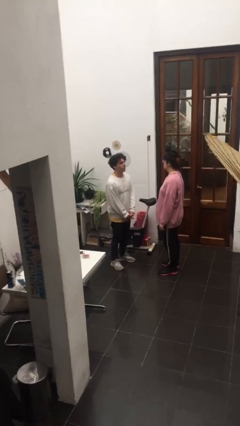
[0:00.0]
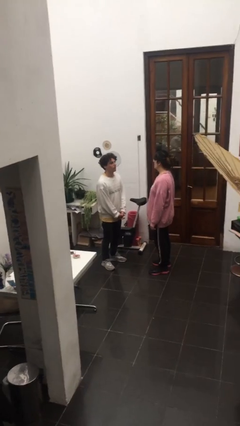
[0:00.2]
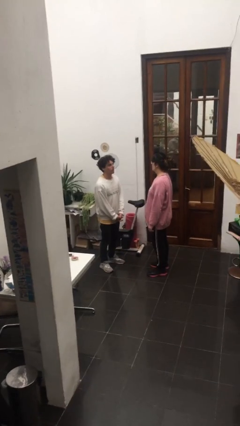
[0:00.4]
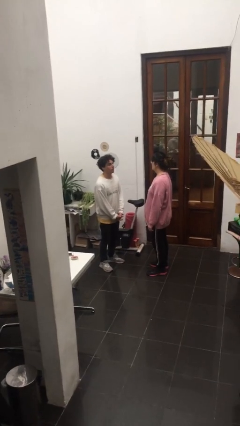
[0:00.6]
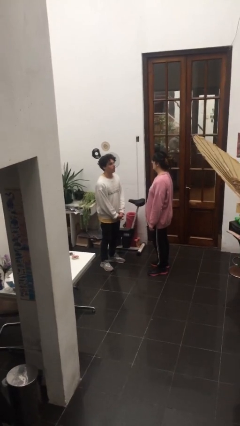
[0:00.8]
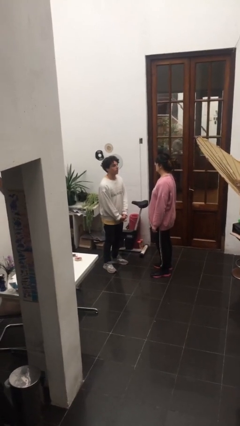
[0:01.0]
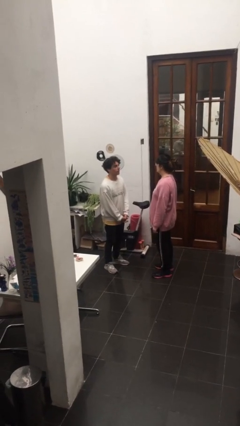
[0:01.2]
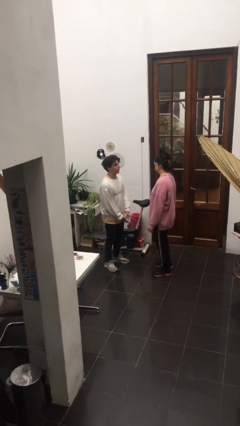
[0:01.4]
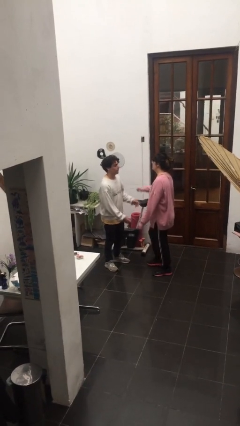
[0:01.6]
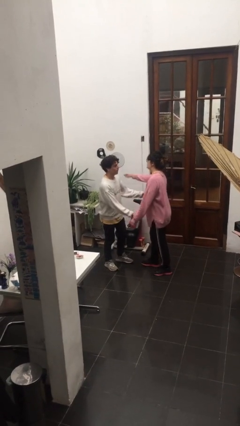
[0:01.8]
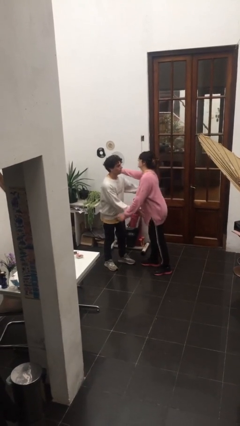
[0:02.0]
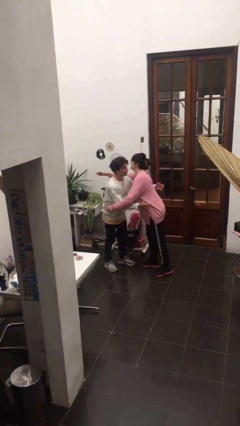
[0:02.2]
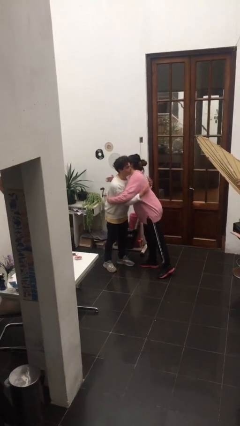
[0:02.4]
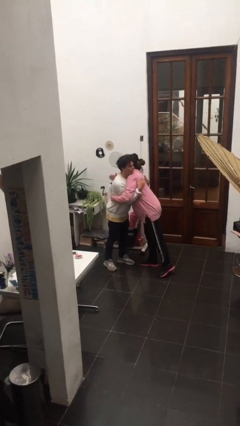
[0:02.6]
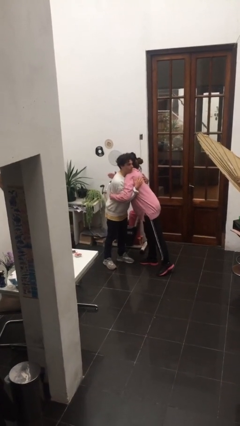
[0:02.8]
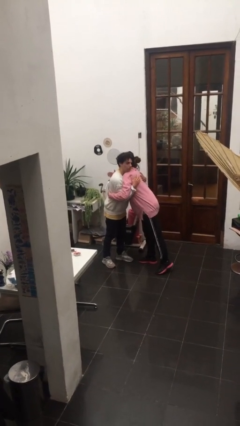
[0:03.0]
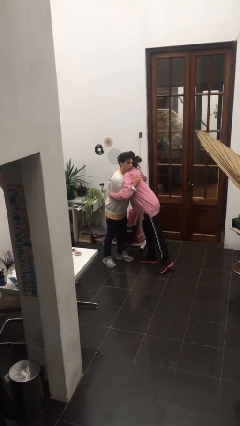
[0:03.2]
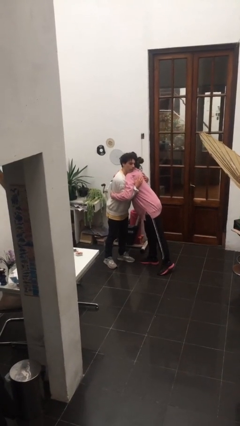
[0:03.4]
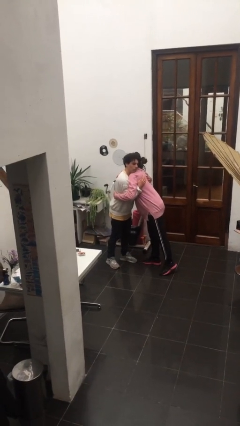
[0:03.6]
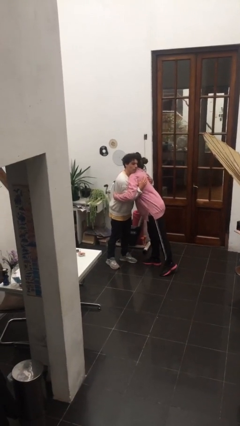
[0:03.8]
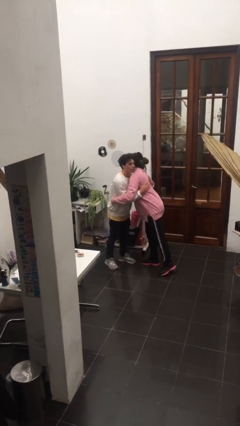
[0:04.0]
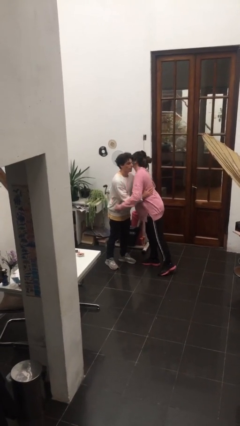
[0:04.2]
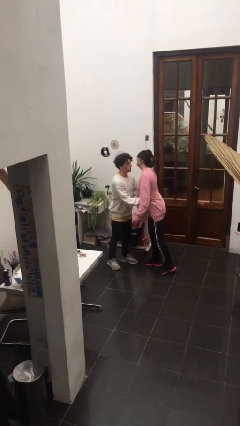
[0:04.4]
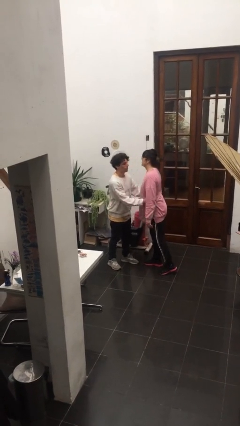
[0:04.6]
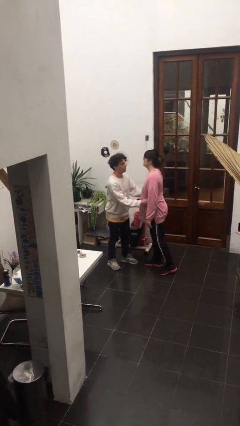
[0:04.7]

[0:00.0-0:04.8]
person embraces person

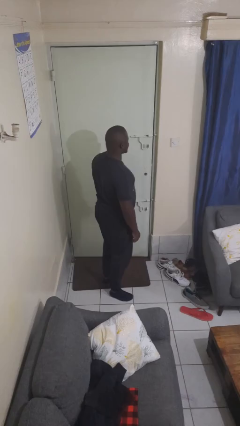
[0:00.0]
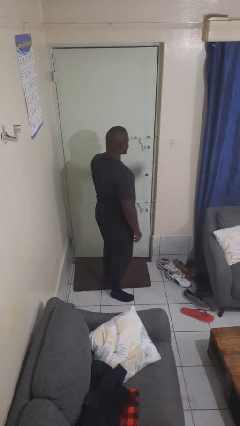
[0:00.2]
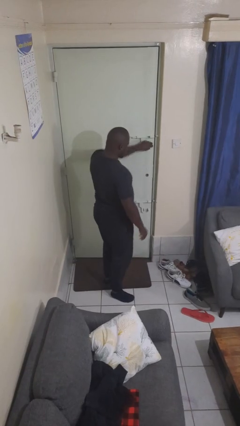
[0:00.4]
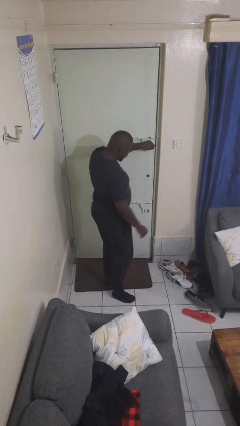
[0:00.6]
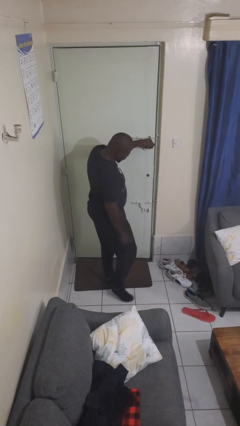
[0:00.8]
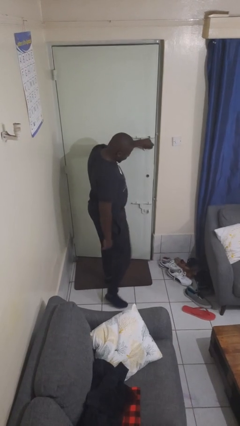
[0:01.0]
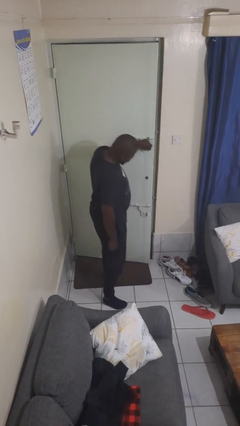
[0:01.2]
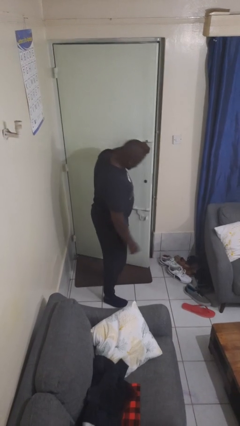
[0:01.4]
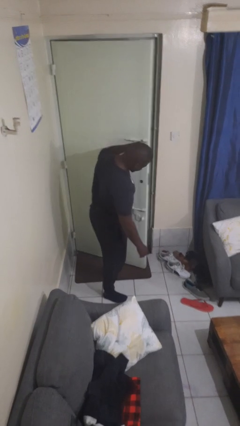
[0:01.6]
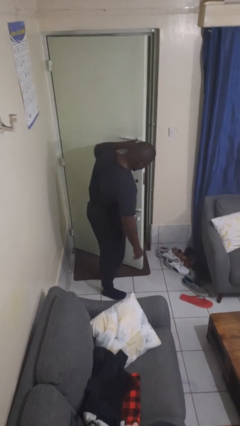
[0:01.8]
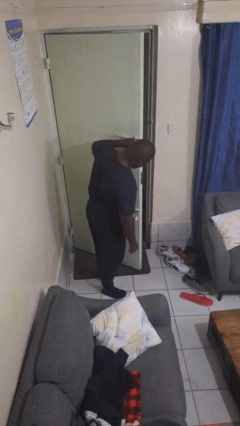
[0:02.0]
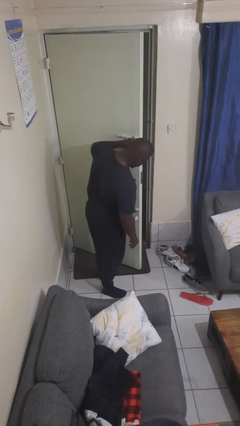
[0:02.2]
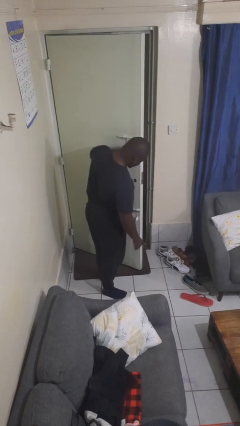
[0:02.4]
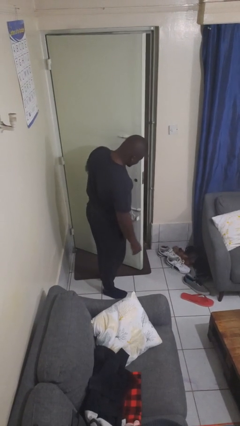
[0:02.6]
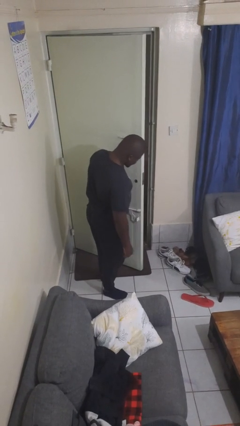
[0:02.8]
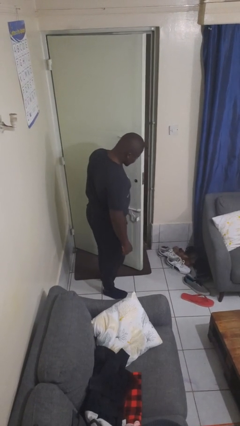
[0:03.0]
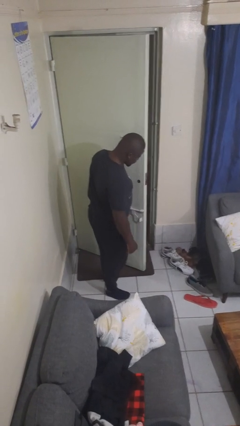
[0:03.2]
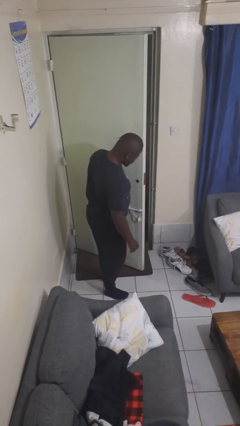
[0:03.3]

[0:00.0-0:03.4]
person opens facility door

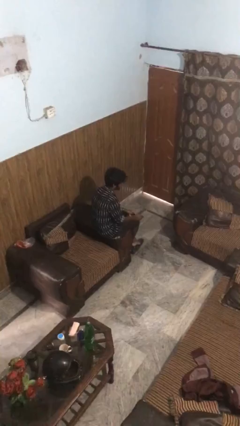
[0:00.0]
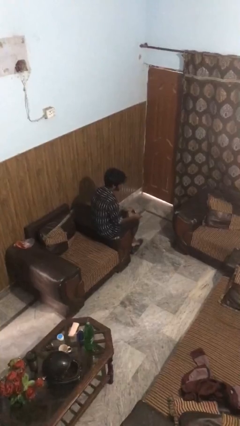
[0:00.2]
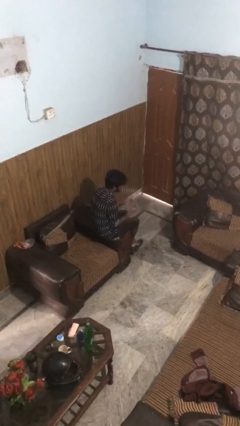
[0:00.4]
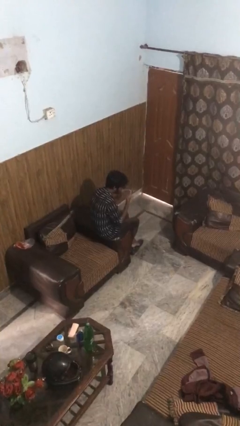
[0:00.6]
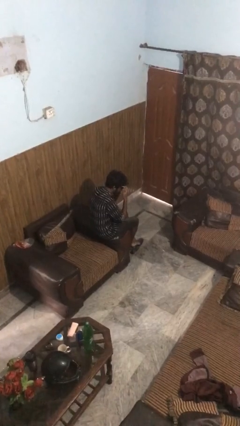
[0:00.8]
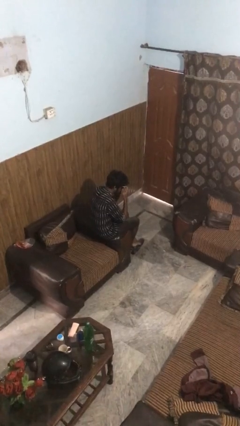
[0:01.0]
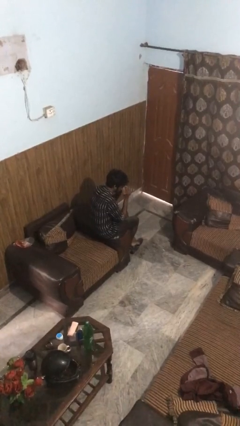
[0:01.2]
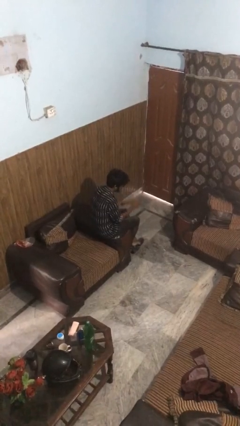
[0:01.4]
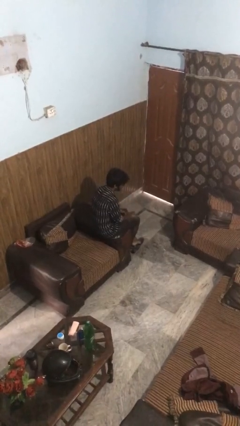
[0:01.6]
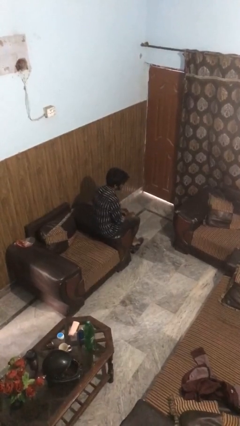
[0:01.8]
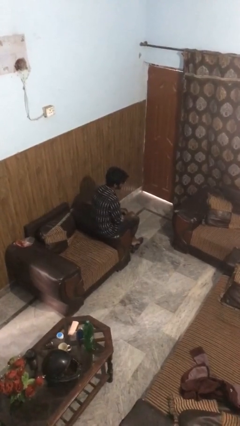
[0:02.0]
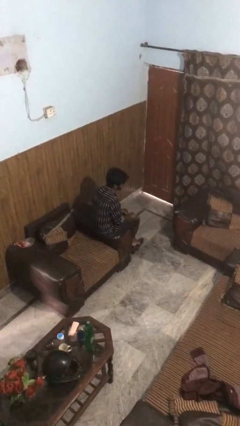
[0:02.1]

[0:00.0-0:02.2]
person puts on sunglasses

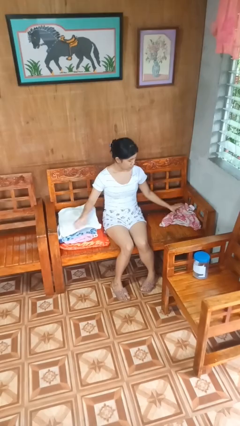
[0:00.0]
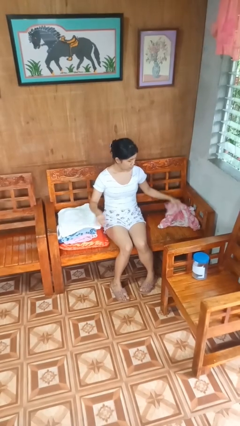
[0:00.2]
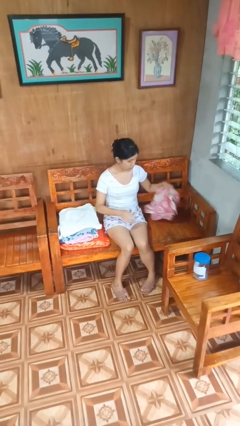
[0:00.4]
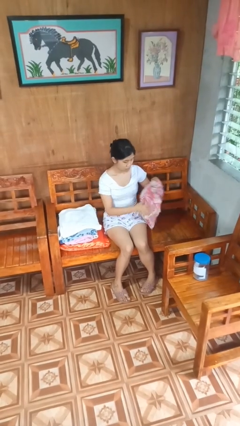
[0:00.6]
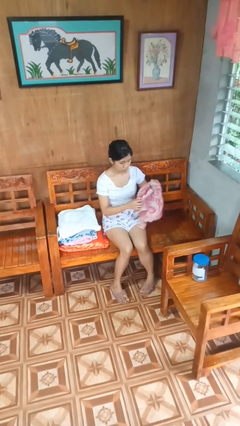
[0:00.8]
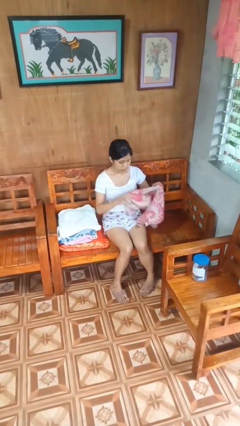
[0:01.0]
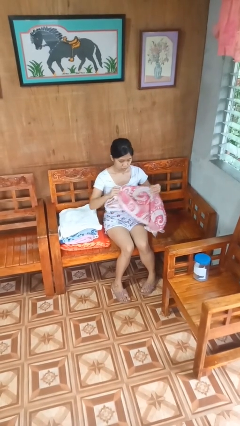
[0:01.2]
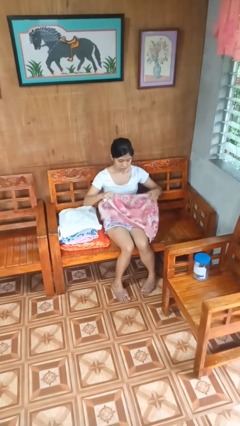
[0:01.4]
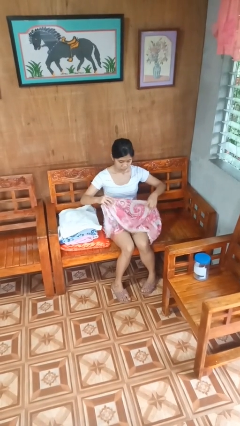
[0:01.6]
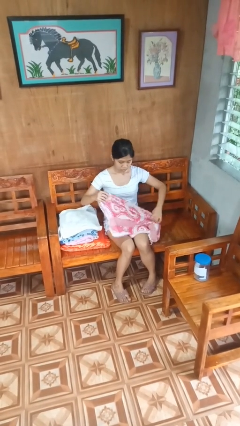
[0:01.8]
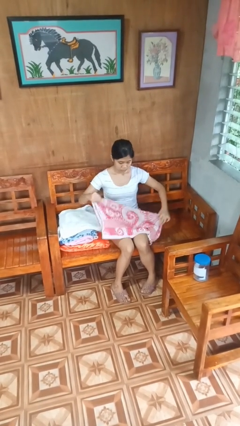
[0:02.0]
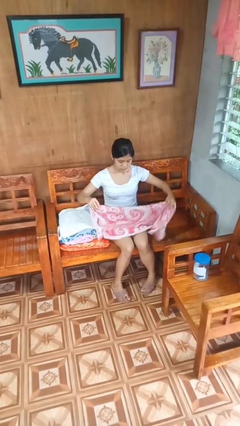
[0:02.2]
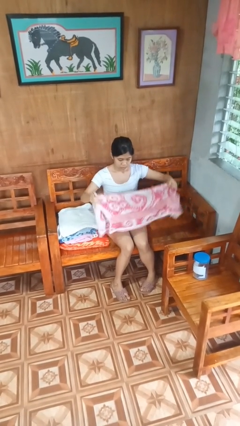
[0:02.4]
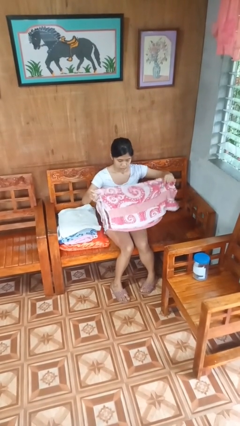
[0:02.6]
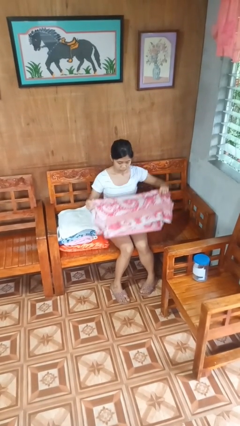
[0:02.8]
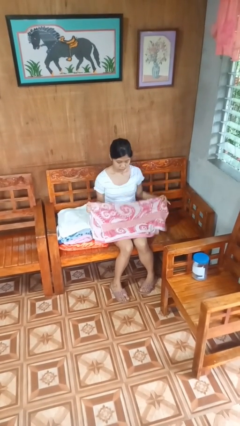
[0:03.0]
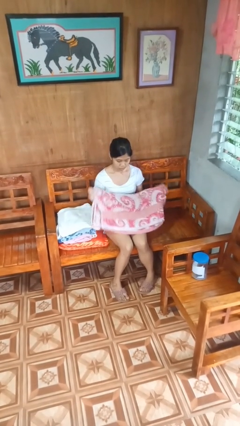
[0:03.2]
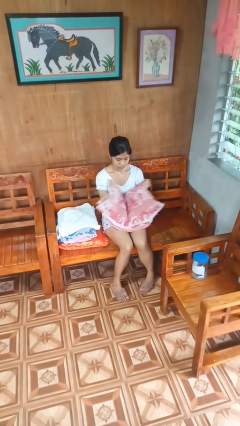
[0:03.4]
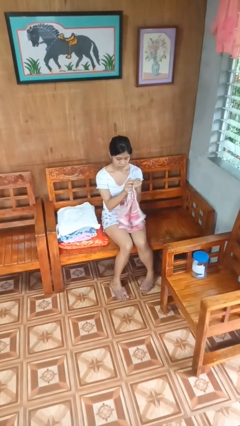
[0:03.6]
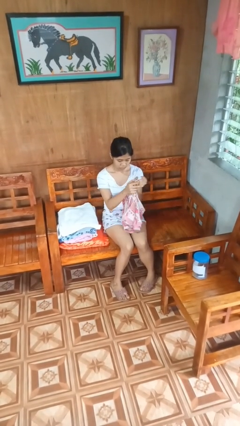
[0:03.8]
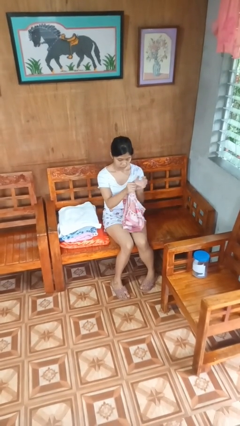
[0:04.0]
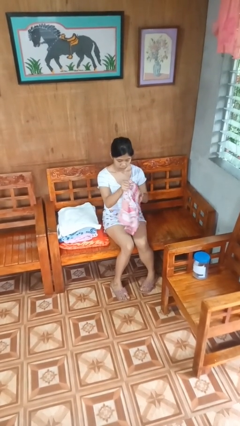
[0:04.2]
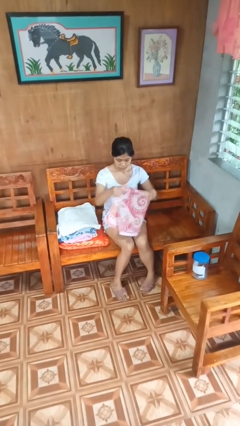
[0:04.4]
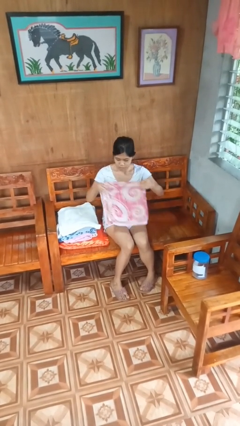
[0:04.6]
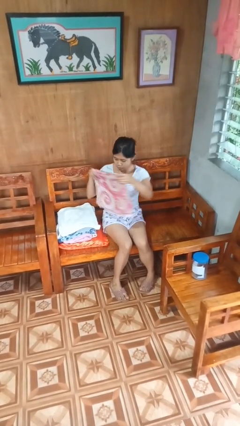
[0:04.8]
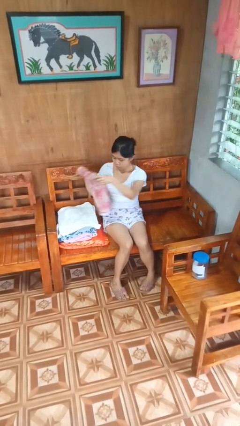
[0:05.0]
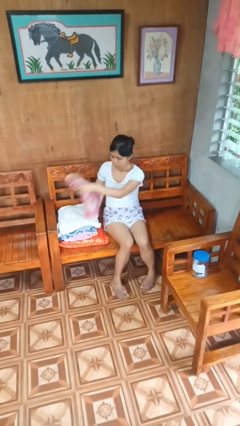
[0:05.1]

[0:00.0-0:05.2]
person folds towel

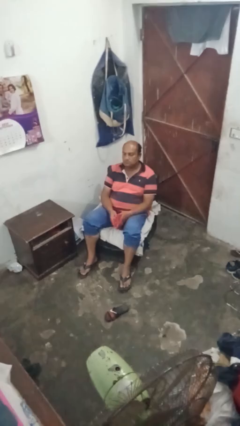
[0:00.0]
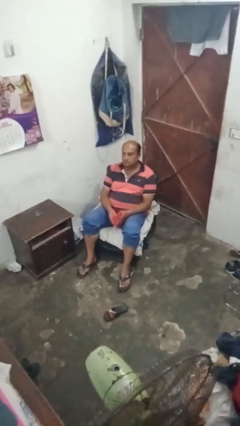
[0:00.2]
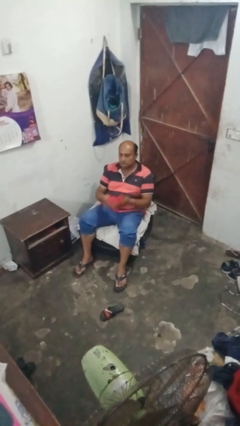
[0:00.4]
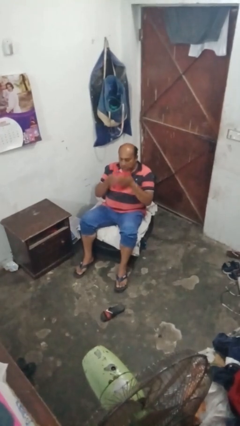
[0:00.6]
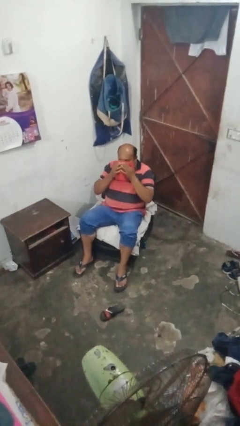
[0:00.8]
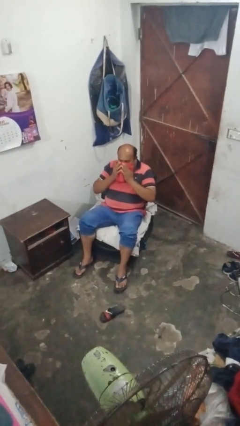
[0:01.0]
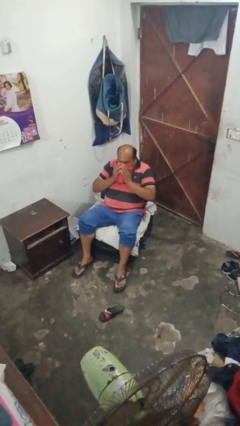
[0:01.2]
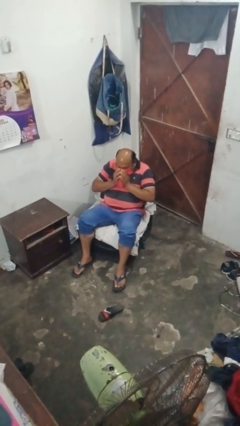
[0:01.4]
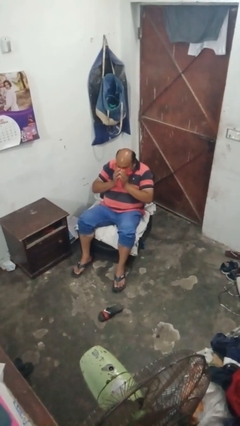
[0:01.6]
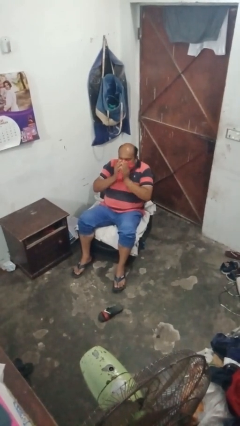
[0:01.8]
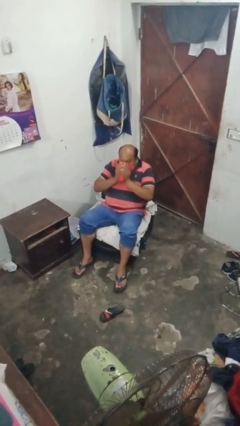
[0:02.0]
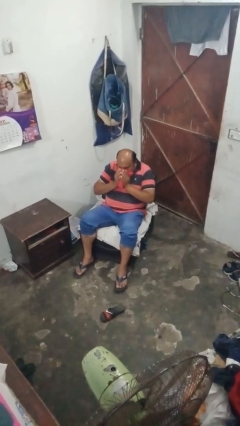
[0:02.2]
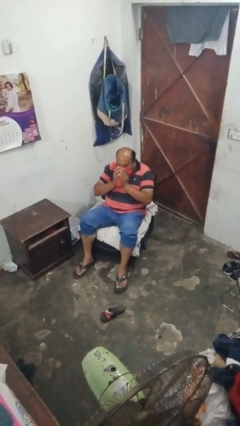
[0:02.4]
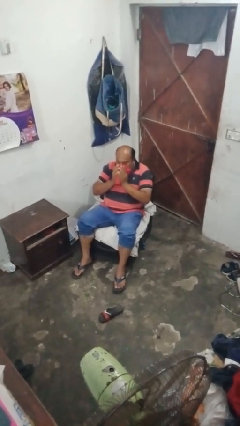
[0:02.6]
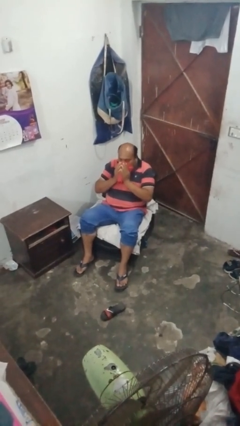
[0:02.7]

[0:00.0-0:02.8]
person blows nose
